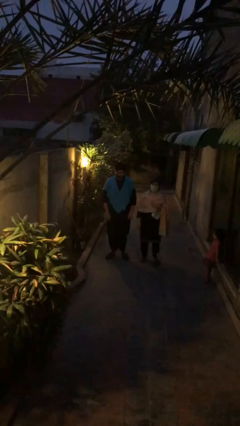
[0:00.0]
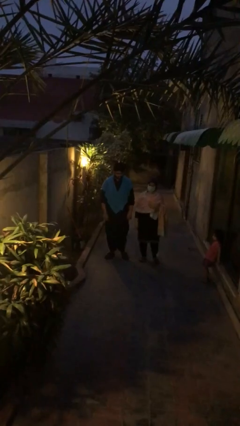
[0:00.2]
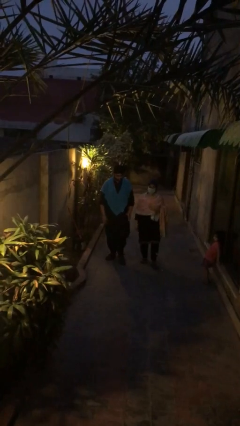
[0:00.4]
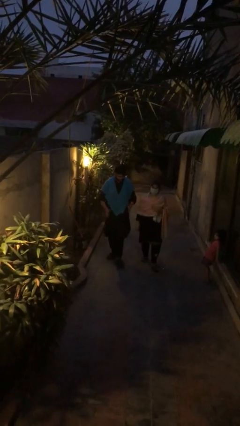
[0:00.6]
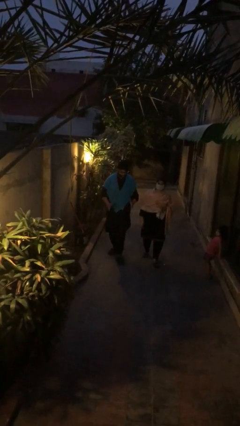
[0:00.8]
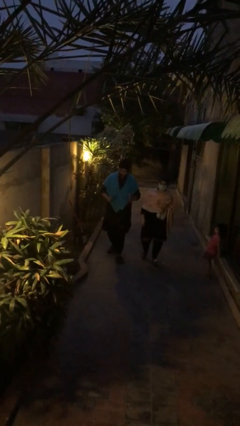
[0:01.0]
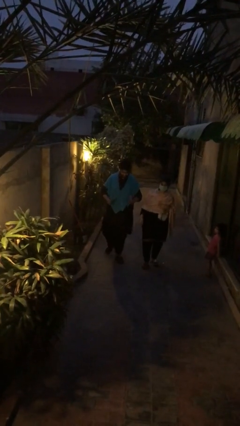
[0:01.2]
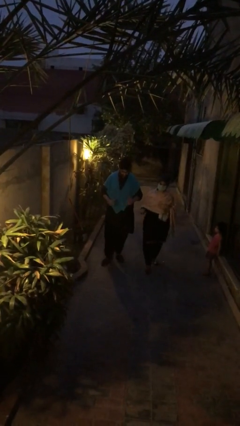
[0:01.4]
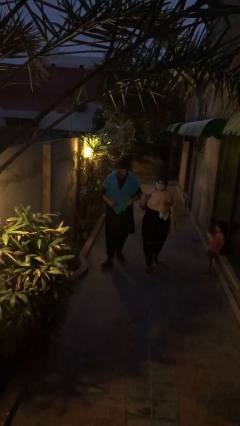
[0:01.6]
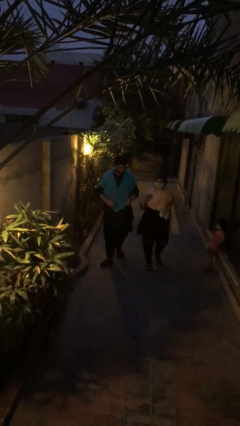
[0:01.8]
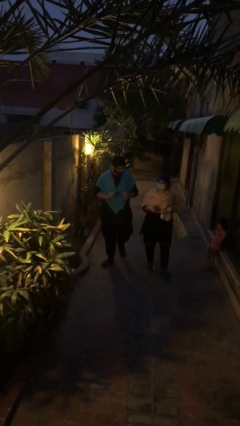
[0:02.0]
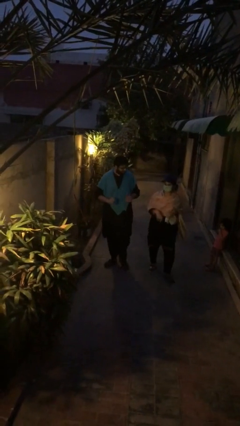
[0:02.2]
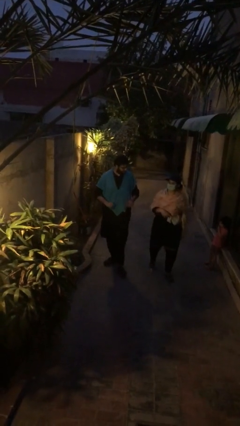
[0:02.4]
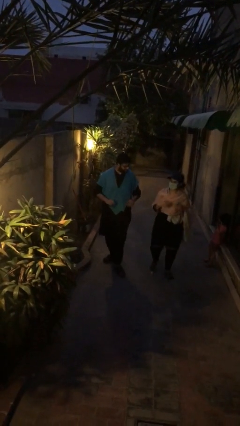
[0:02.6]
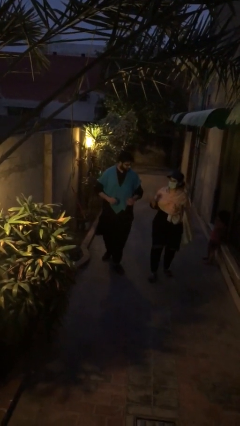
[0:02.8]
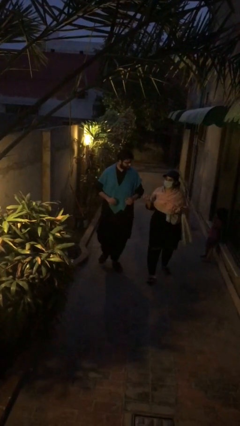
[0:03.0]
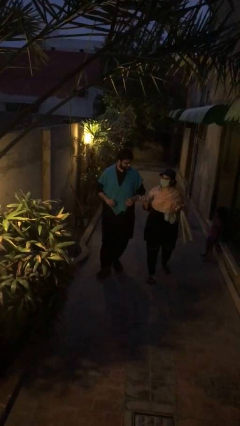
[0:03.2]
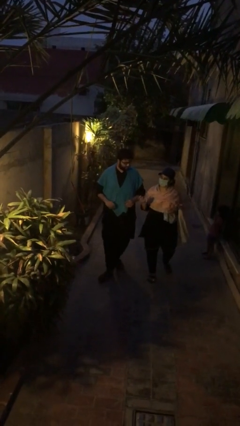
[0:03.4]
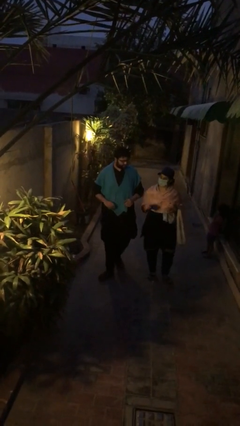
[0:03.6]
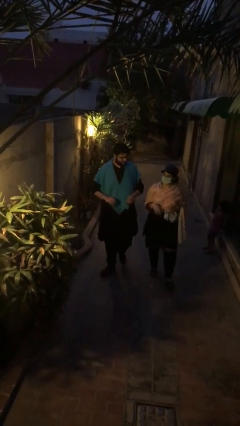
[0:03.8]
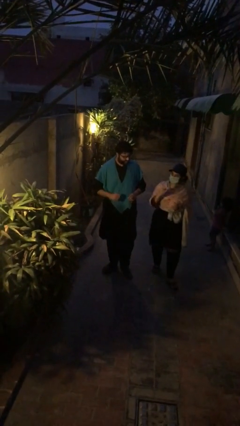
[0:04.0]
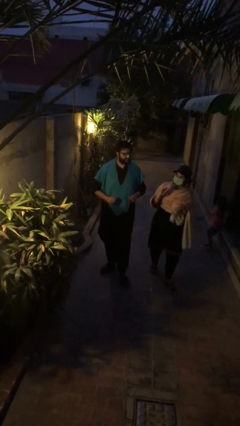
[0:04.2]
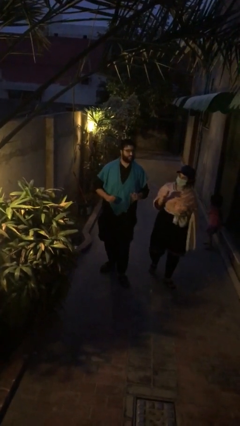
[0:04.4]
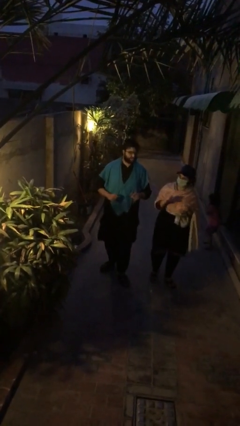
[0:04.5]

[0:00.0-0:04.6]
person talks to person

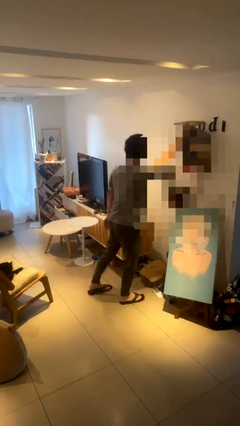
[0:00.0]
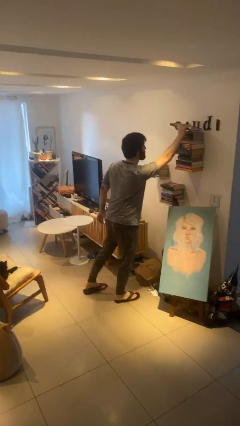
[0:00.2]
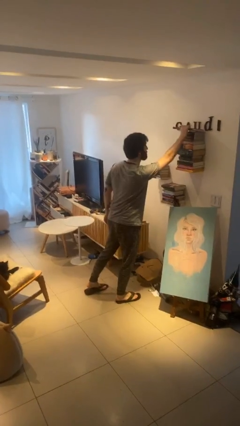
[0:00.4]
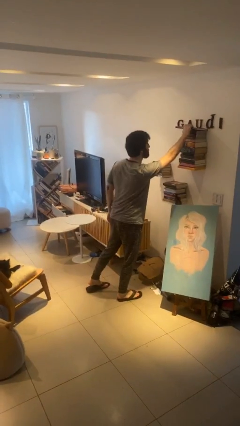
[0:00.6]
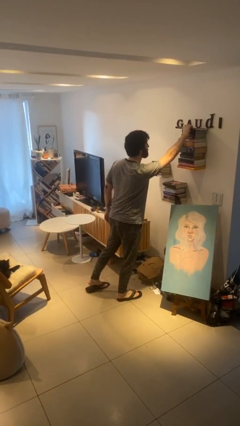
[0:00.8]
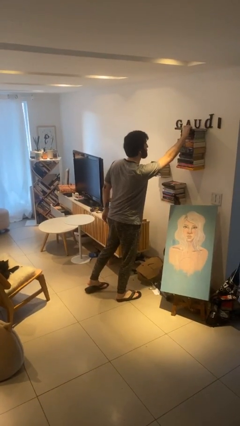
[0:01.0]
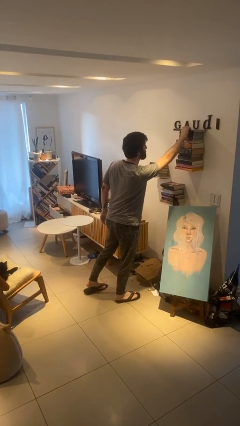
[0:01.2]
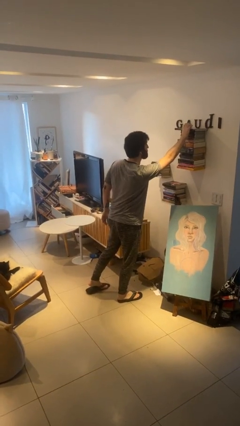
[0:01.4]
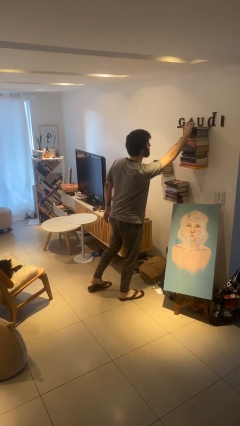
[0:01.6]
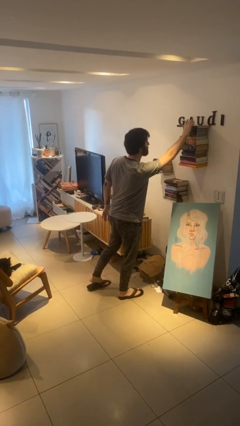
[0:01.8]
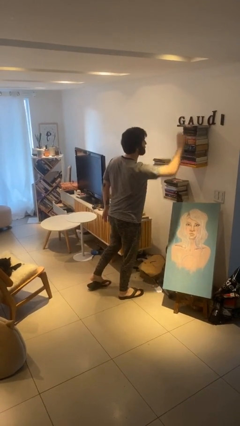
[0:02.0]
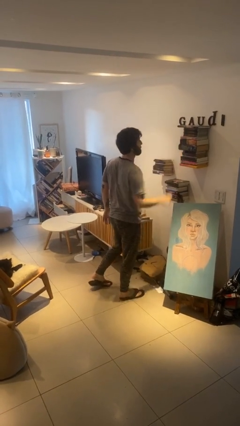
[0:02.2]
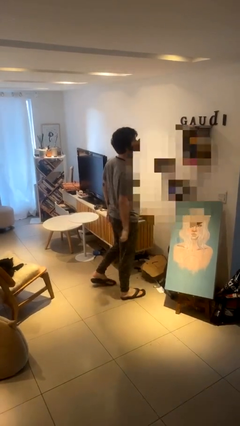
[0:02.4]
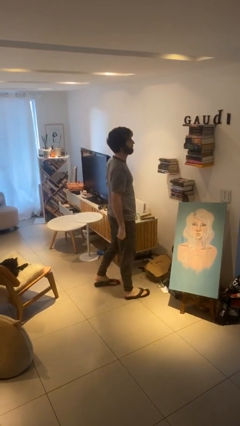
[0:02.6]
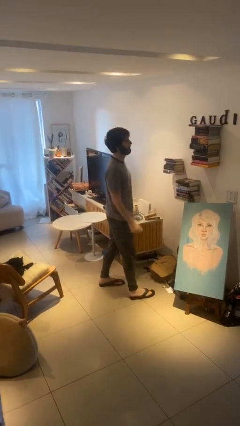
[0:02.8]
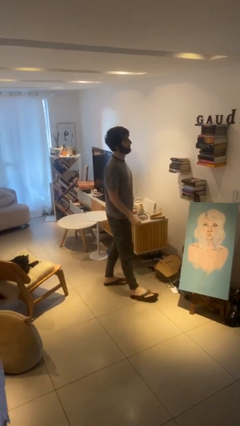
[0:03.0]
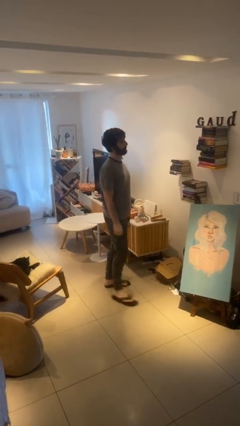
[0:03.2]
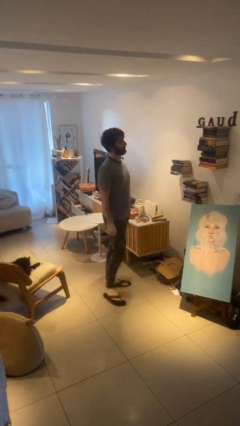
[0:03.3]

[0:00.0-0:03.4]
person puts down object on shelf

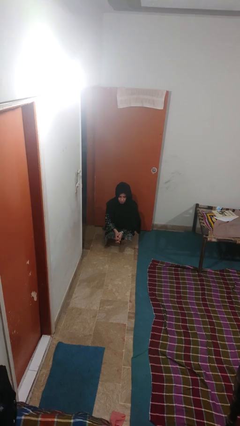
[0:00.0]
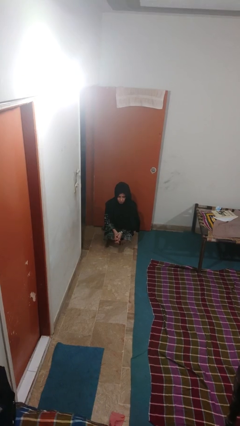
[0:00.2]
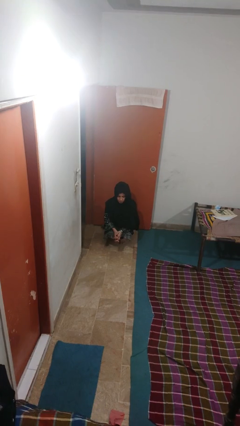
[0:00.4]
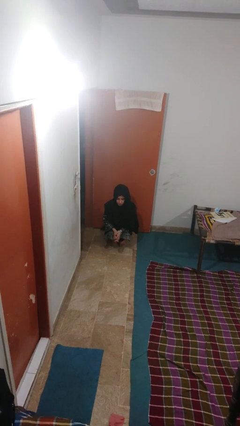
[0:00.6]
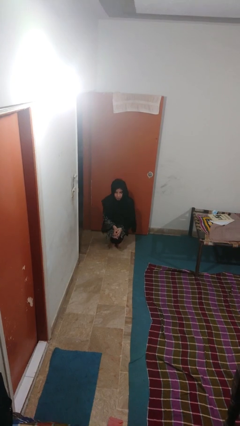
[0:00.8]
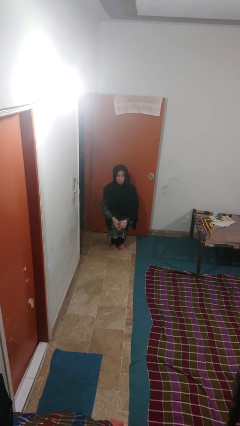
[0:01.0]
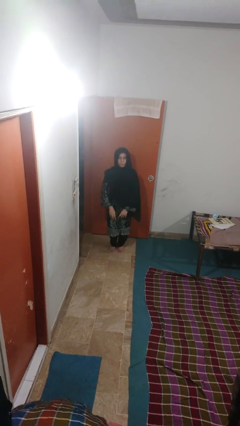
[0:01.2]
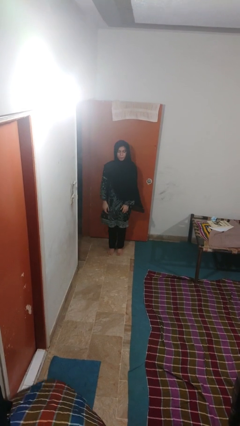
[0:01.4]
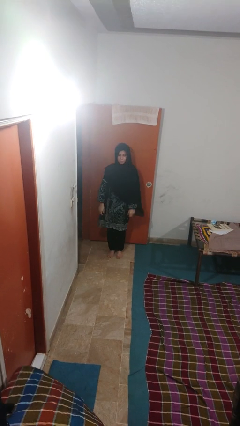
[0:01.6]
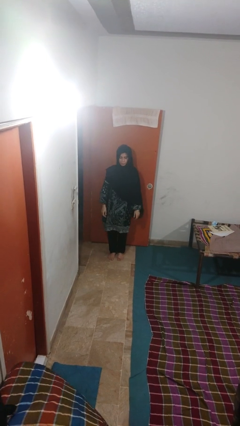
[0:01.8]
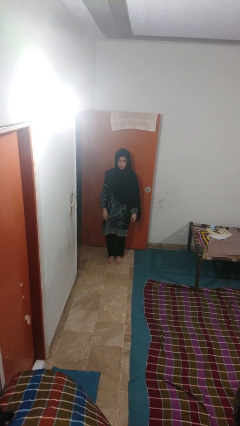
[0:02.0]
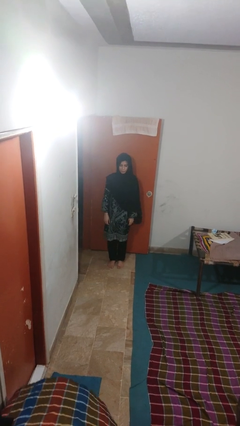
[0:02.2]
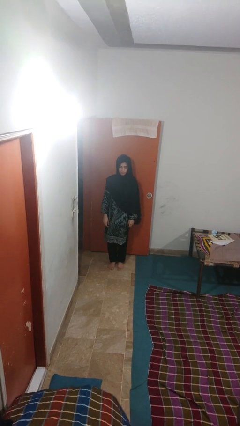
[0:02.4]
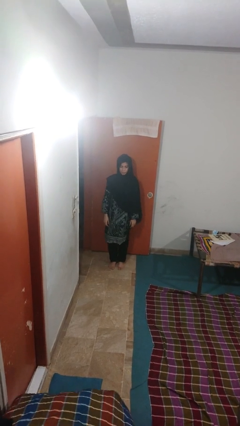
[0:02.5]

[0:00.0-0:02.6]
person stands up

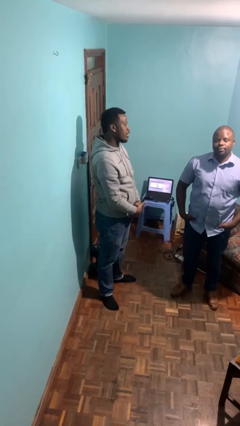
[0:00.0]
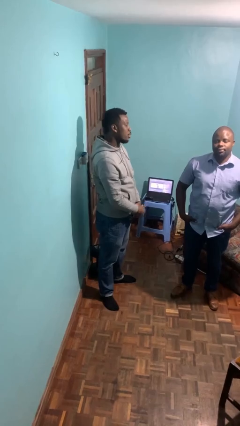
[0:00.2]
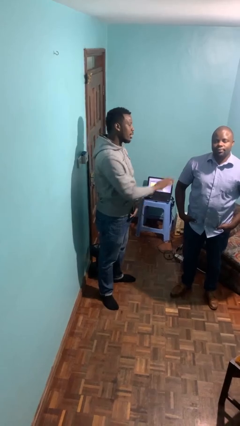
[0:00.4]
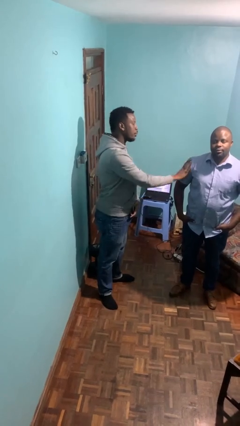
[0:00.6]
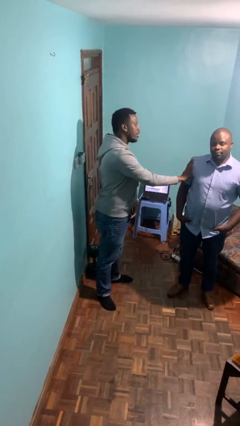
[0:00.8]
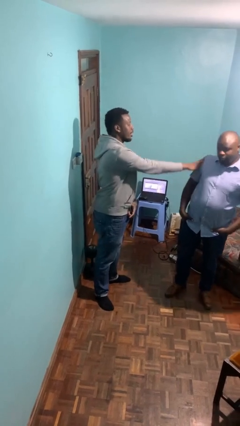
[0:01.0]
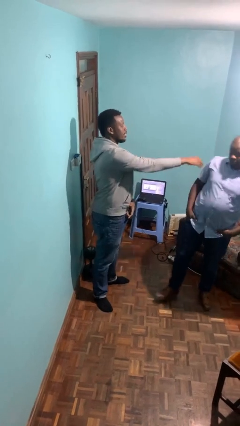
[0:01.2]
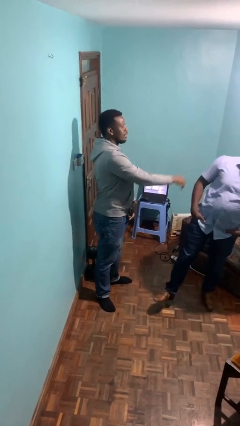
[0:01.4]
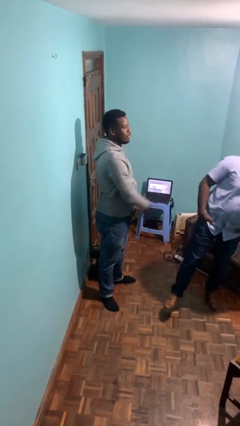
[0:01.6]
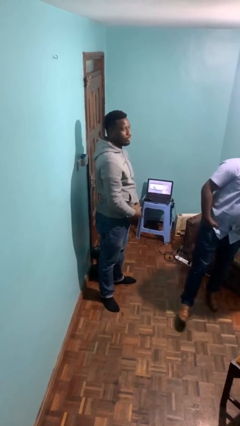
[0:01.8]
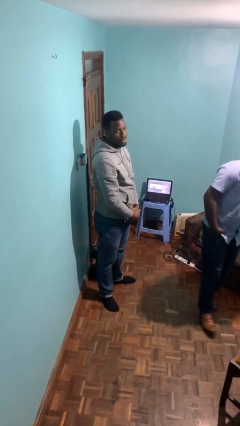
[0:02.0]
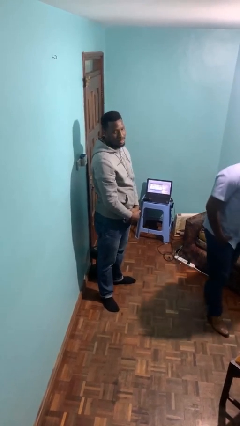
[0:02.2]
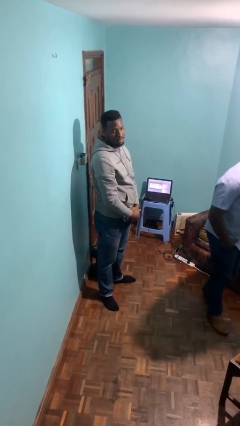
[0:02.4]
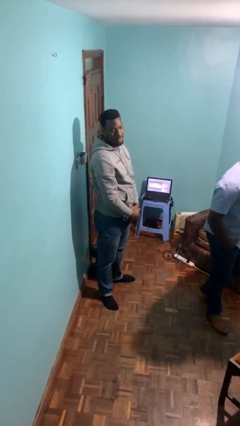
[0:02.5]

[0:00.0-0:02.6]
person shoves person

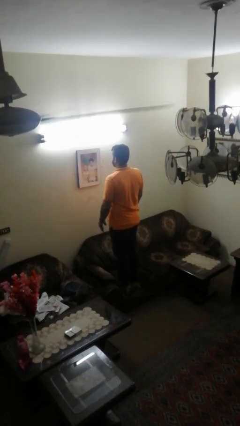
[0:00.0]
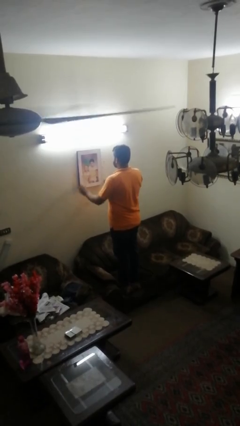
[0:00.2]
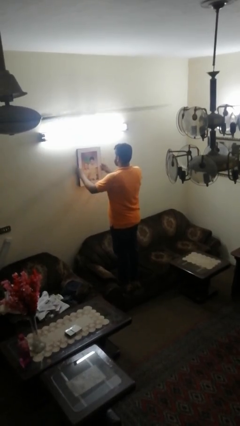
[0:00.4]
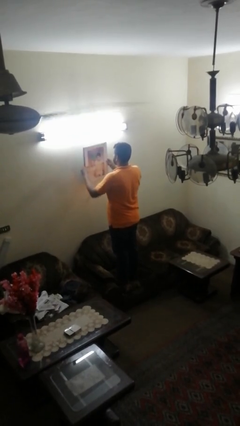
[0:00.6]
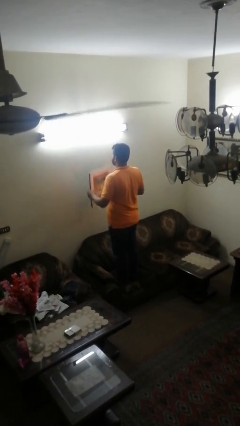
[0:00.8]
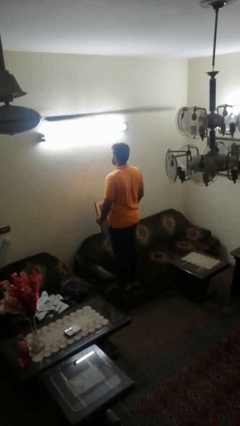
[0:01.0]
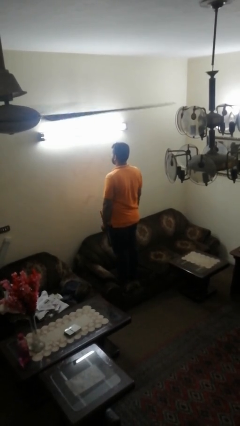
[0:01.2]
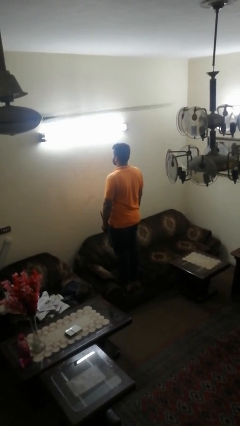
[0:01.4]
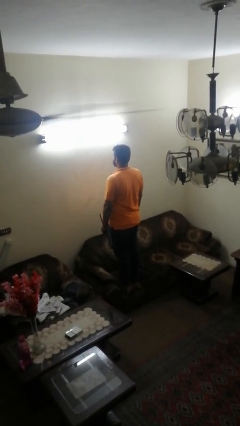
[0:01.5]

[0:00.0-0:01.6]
person takes down picture frame

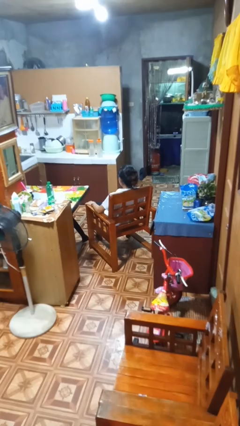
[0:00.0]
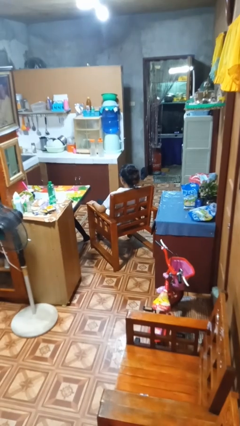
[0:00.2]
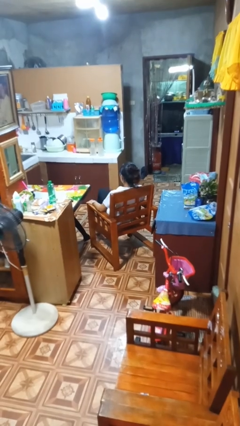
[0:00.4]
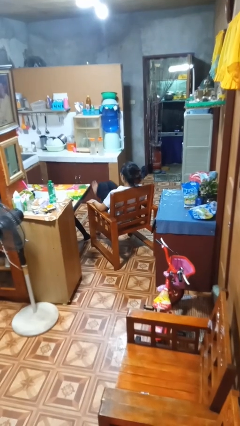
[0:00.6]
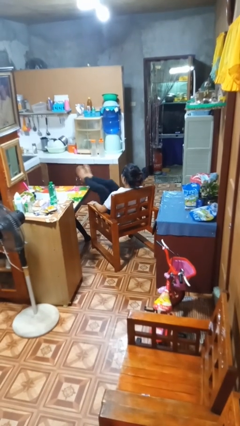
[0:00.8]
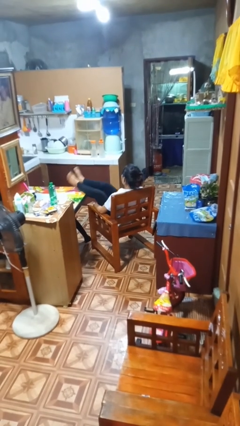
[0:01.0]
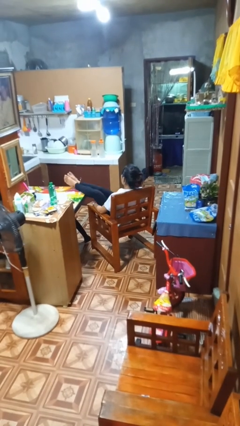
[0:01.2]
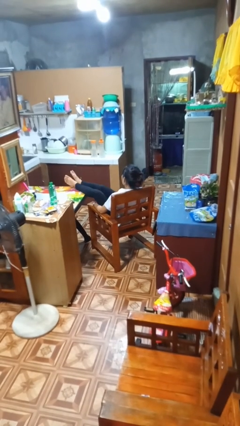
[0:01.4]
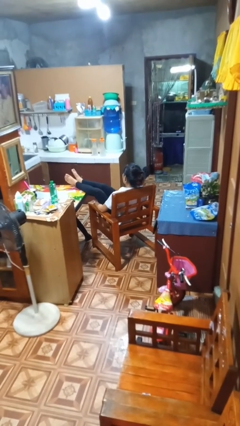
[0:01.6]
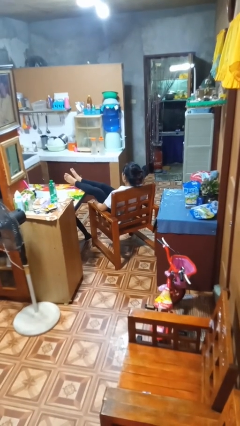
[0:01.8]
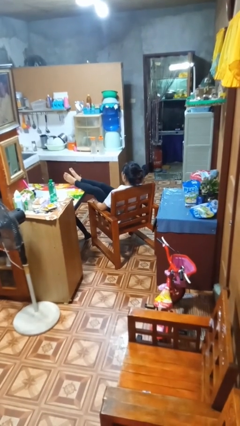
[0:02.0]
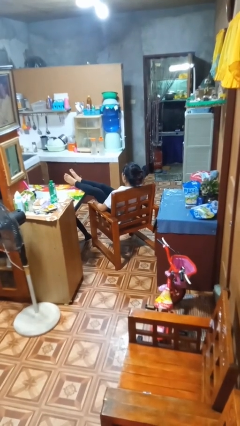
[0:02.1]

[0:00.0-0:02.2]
person puts feet up

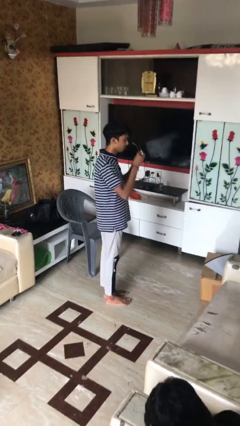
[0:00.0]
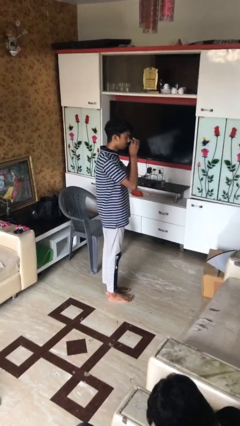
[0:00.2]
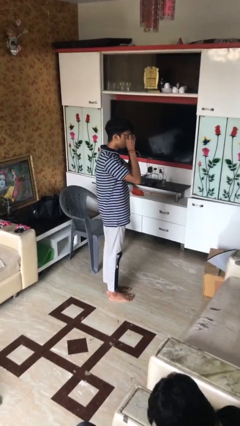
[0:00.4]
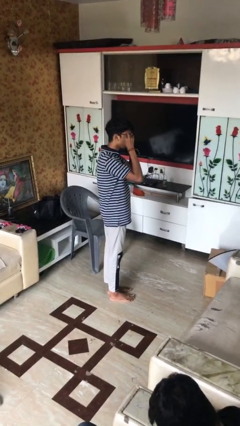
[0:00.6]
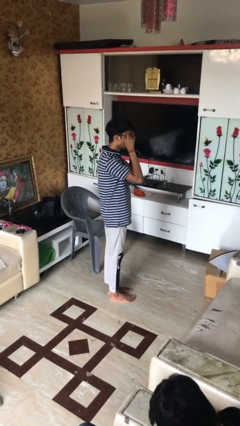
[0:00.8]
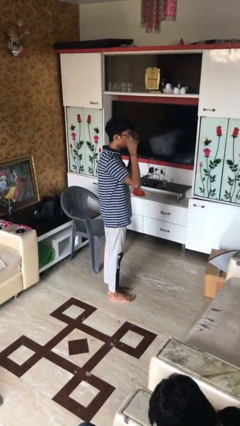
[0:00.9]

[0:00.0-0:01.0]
person puts on glasses
